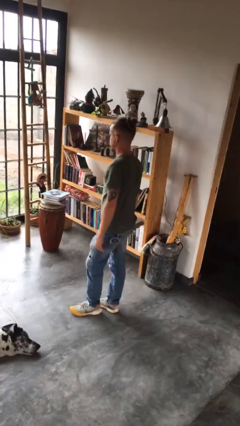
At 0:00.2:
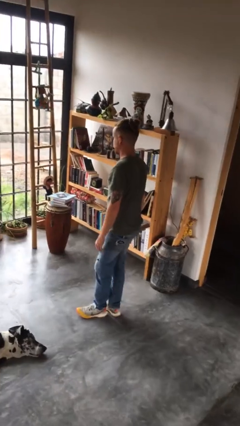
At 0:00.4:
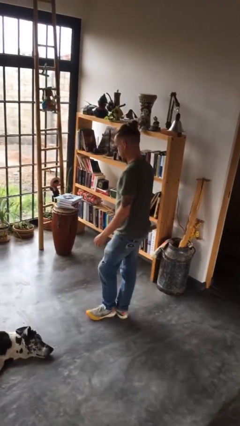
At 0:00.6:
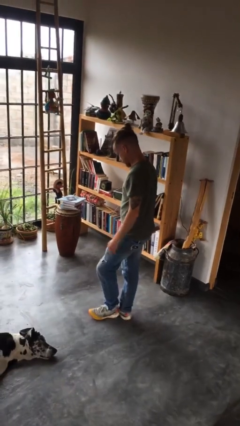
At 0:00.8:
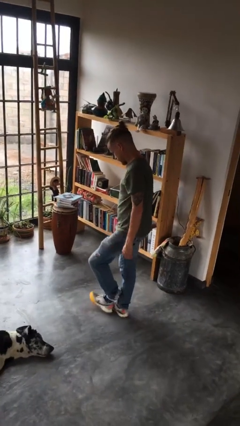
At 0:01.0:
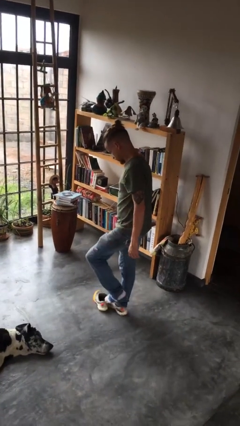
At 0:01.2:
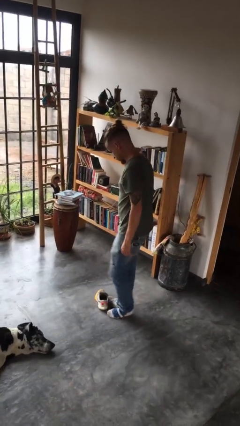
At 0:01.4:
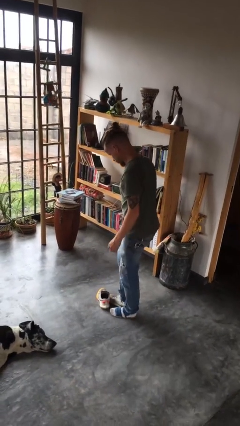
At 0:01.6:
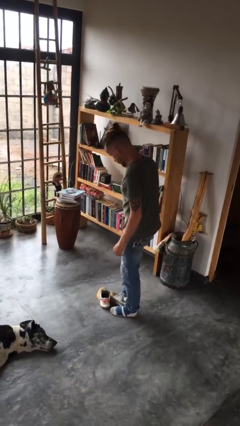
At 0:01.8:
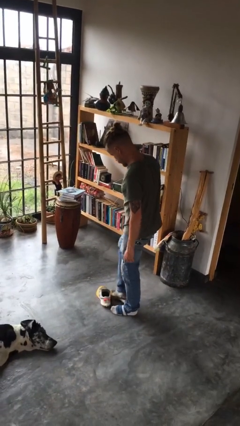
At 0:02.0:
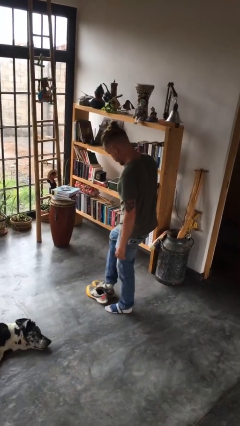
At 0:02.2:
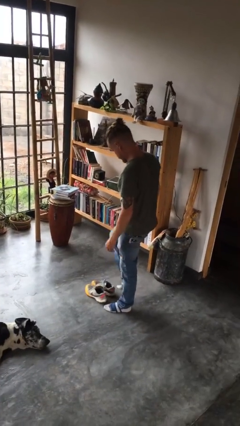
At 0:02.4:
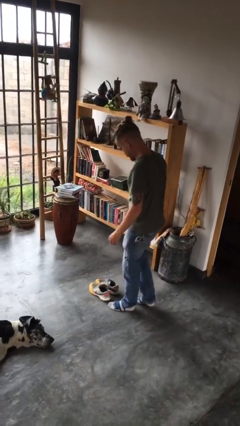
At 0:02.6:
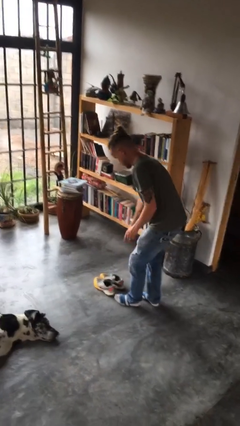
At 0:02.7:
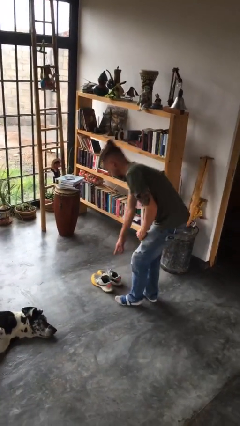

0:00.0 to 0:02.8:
person takes off shoes

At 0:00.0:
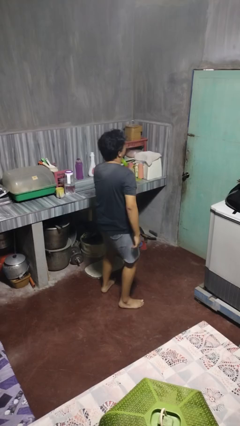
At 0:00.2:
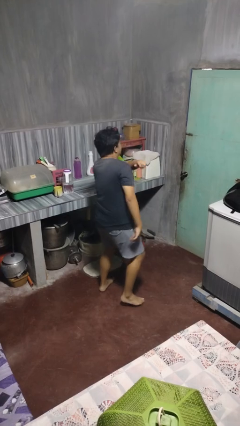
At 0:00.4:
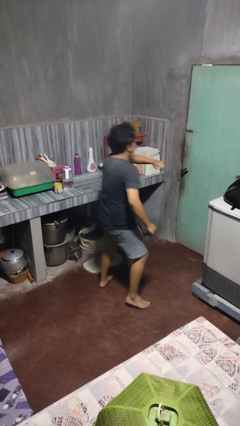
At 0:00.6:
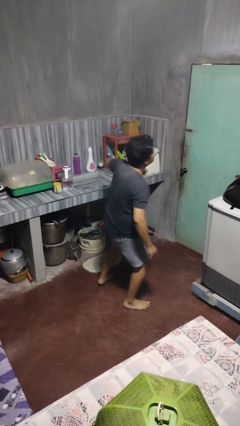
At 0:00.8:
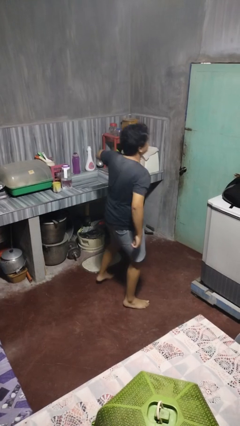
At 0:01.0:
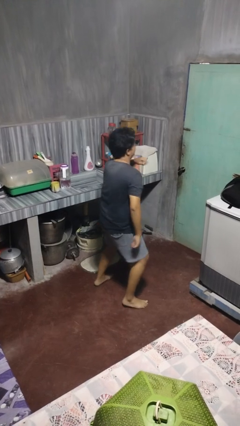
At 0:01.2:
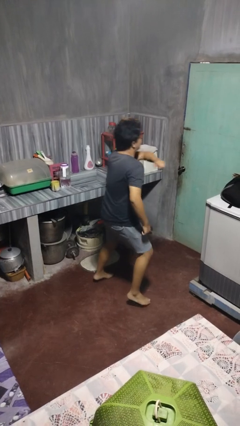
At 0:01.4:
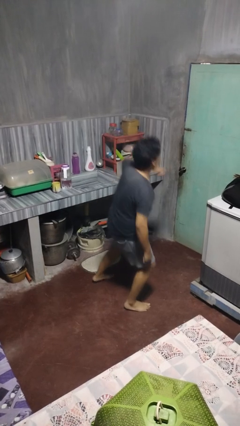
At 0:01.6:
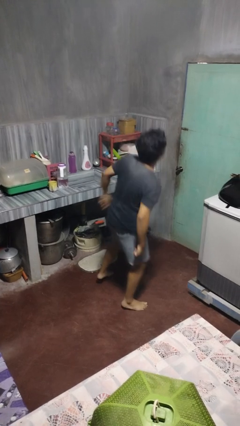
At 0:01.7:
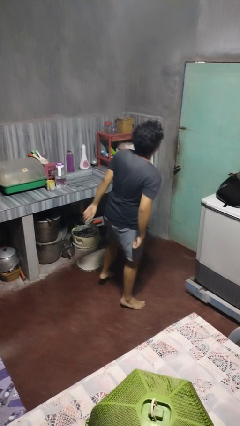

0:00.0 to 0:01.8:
person dances in place

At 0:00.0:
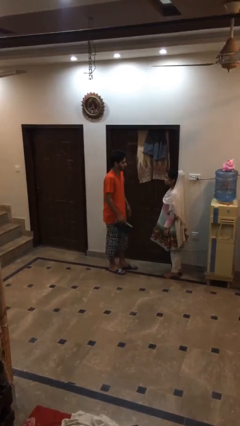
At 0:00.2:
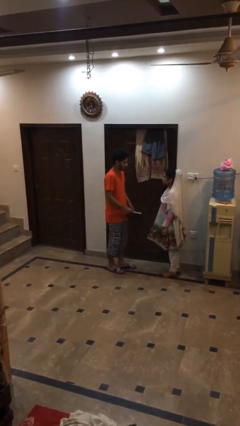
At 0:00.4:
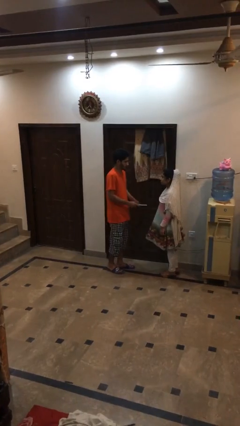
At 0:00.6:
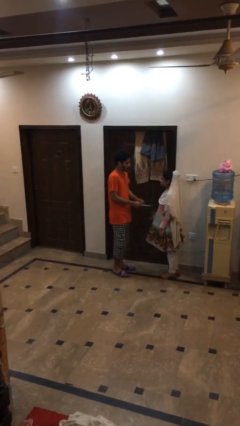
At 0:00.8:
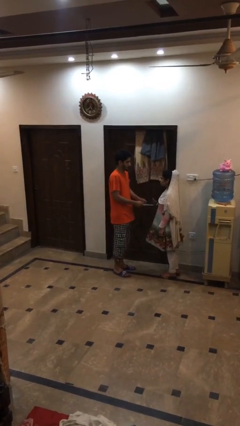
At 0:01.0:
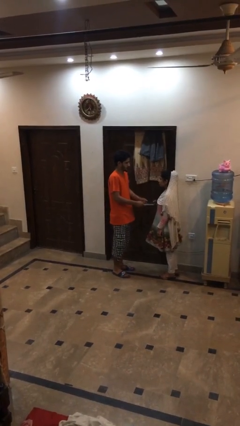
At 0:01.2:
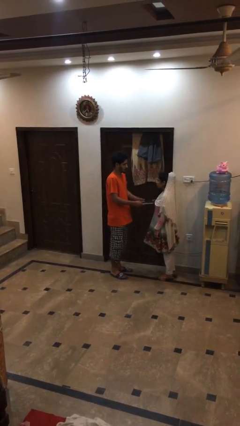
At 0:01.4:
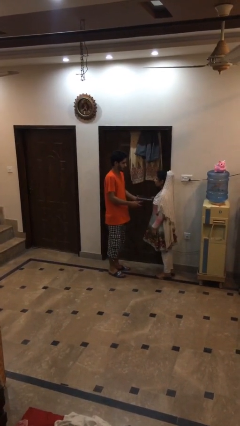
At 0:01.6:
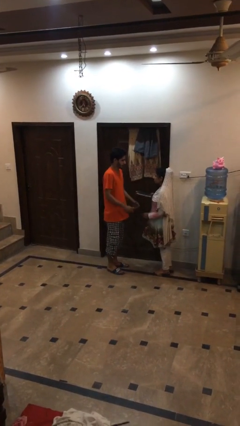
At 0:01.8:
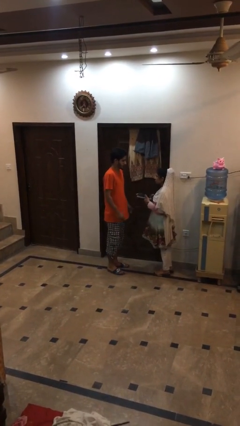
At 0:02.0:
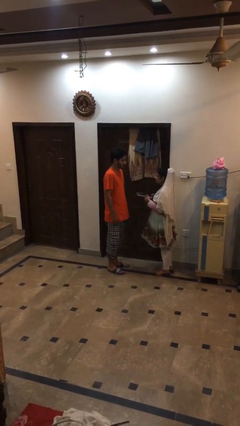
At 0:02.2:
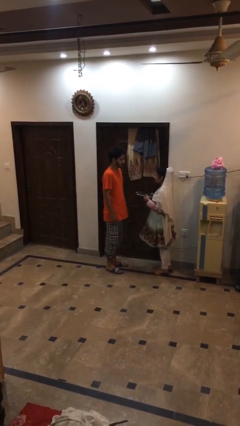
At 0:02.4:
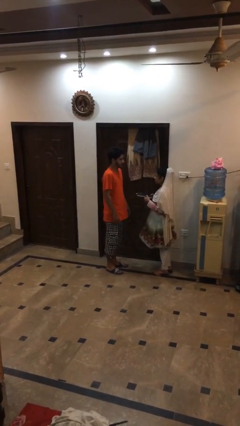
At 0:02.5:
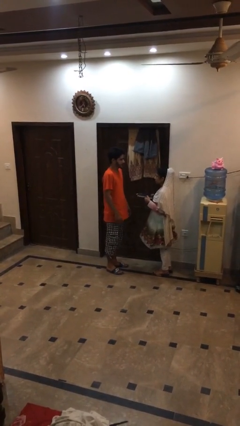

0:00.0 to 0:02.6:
person transfers object to person

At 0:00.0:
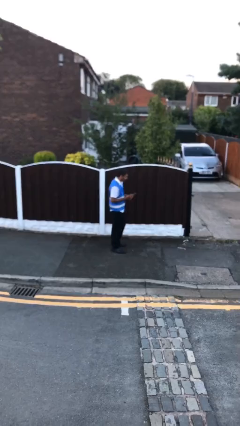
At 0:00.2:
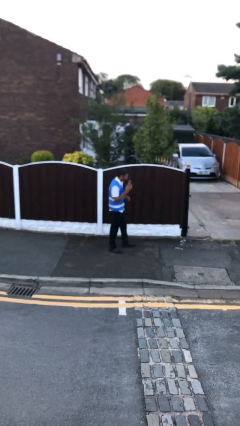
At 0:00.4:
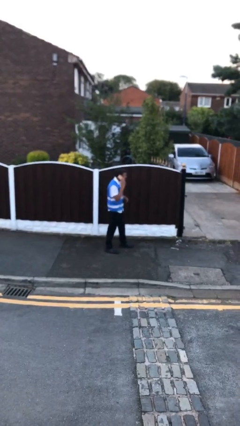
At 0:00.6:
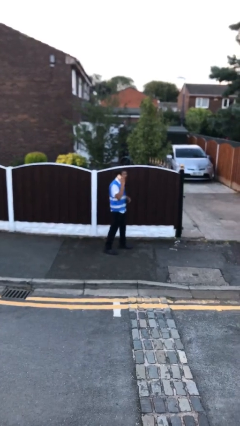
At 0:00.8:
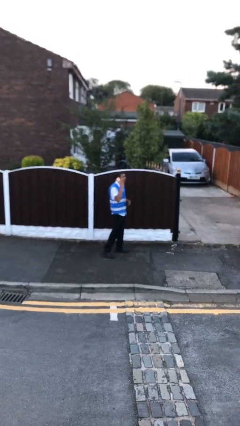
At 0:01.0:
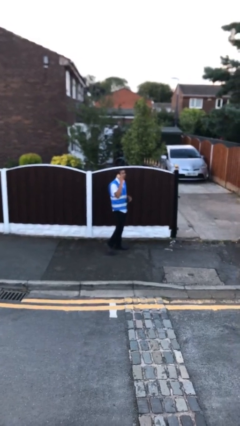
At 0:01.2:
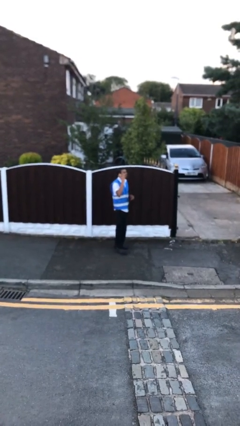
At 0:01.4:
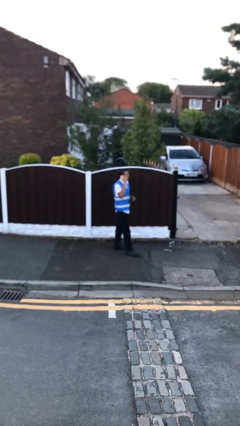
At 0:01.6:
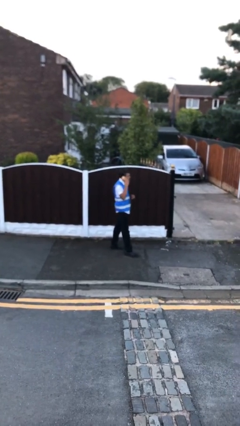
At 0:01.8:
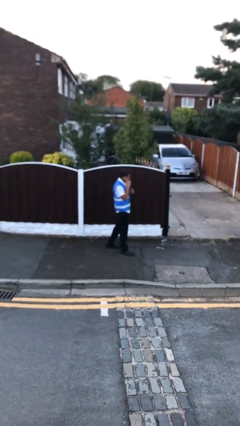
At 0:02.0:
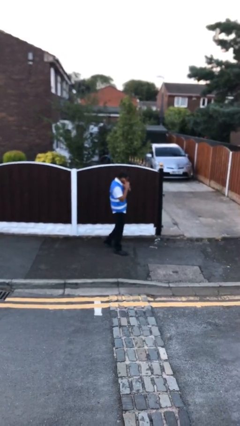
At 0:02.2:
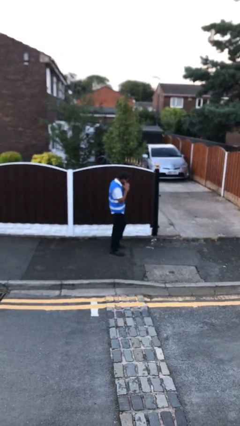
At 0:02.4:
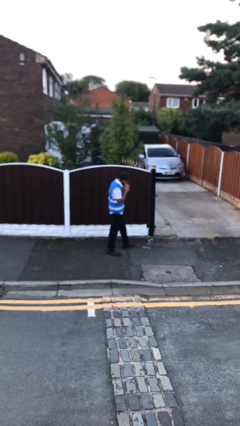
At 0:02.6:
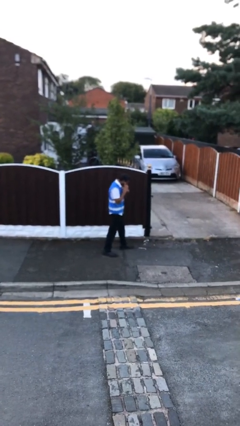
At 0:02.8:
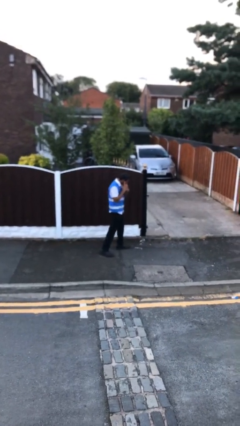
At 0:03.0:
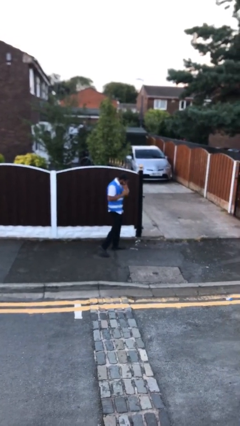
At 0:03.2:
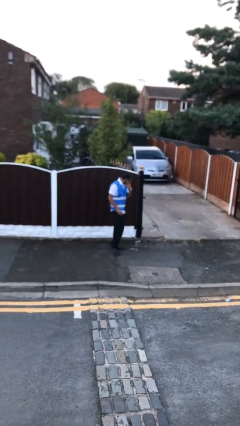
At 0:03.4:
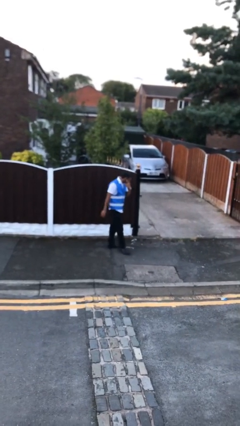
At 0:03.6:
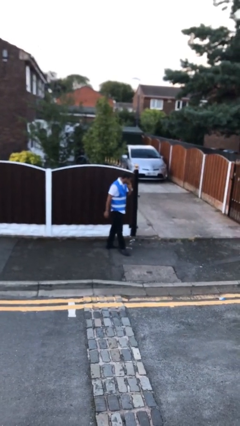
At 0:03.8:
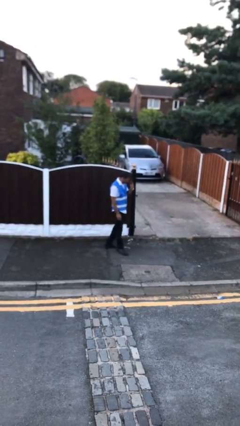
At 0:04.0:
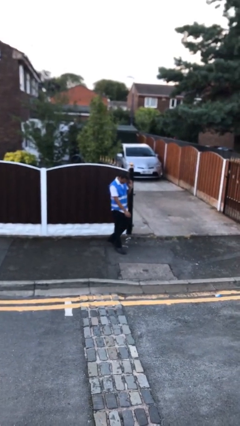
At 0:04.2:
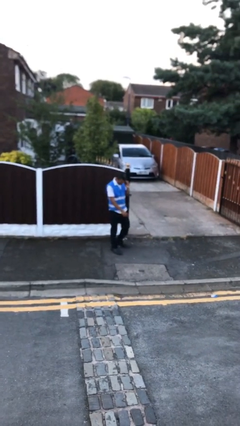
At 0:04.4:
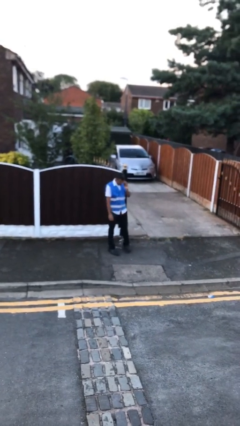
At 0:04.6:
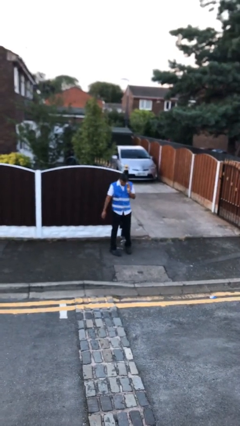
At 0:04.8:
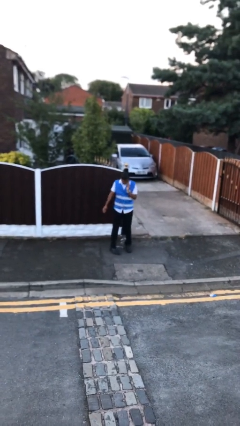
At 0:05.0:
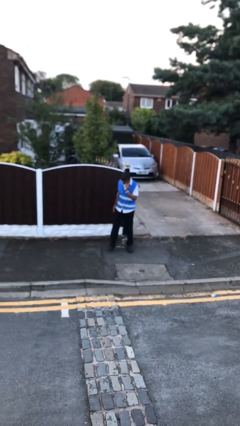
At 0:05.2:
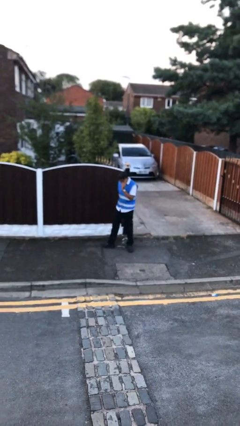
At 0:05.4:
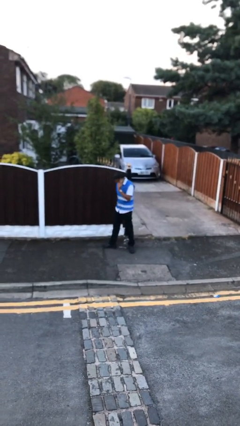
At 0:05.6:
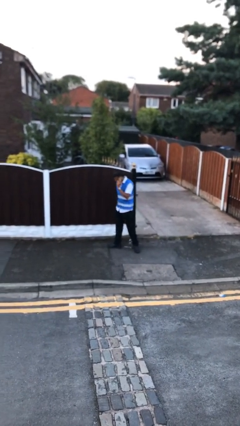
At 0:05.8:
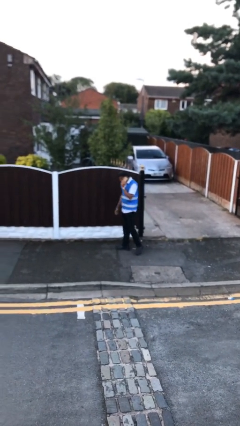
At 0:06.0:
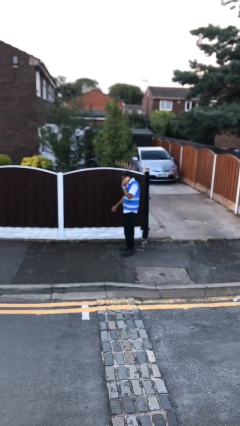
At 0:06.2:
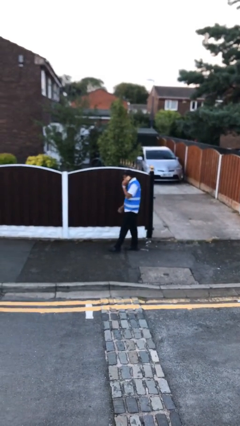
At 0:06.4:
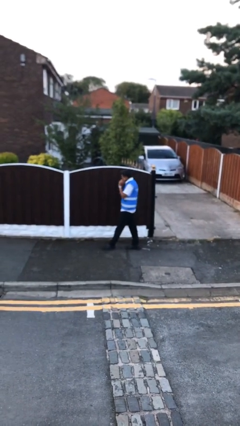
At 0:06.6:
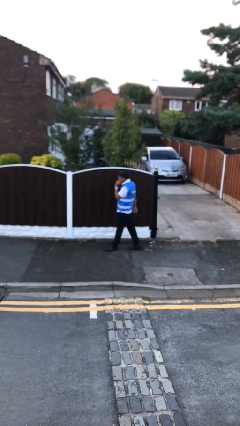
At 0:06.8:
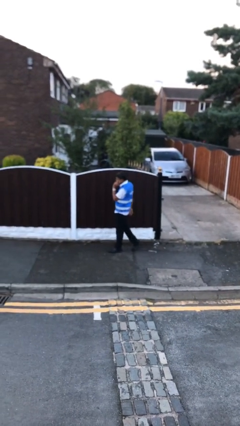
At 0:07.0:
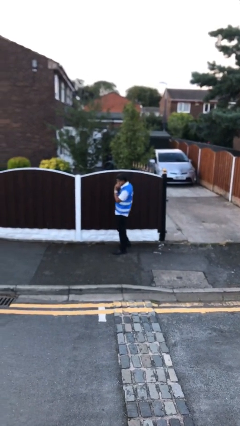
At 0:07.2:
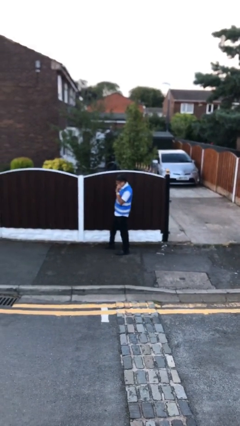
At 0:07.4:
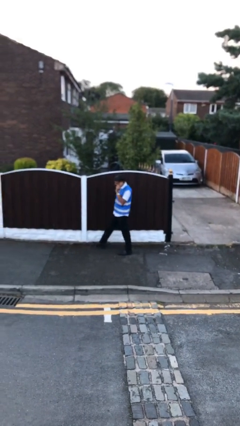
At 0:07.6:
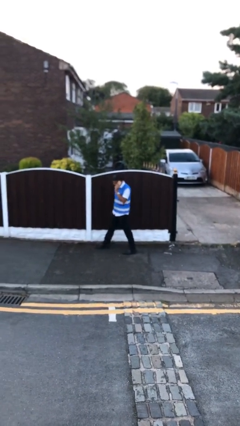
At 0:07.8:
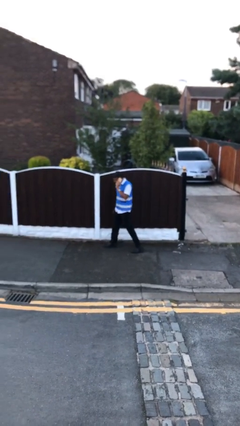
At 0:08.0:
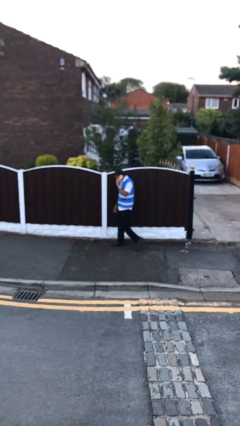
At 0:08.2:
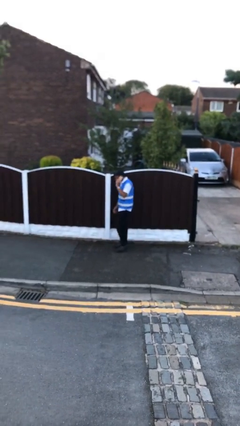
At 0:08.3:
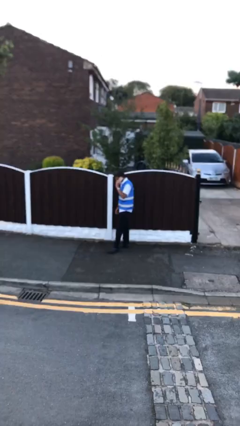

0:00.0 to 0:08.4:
person talks on phone

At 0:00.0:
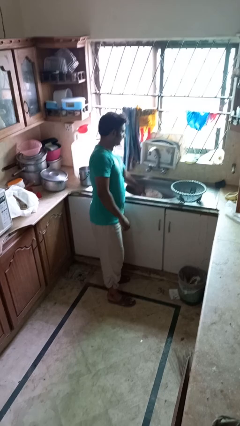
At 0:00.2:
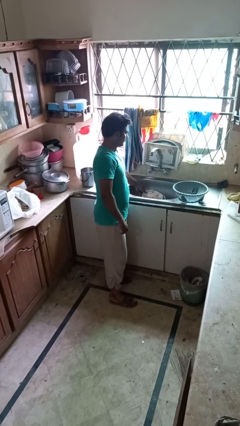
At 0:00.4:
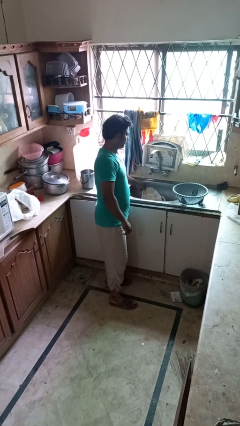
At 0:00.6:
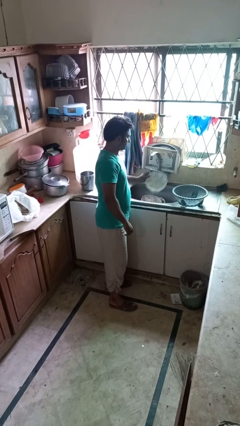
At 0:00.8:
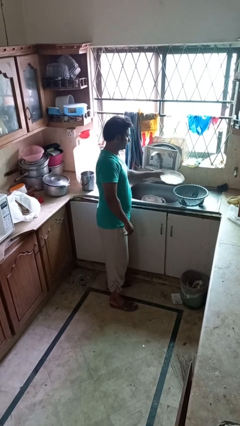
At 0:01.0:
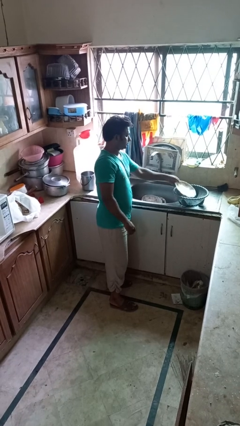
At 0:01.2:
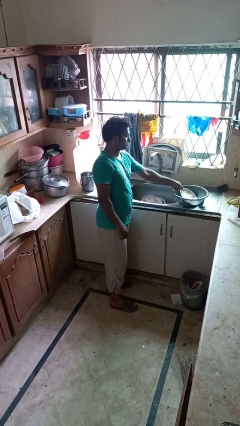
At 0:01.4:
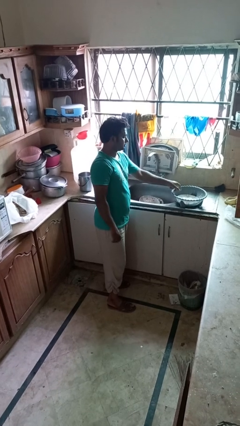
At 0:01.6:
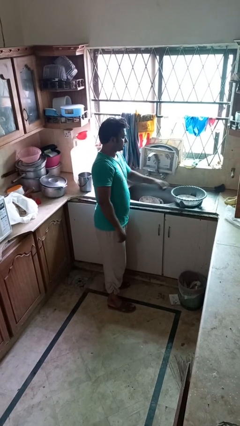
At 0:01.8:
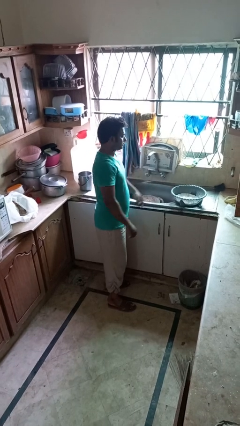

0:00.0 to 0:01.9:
person loads dishwasher
